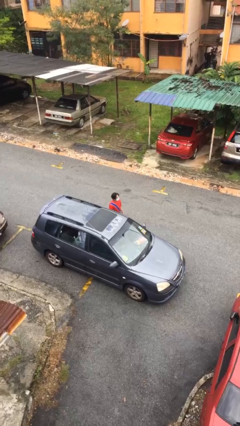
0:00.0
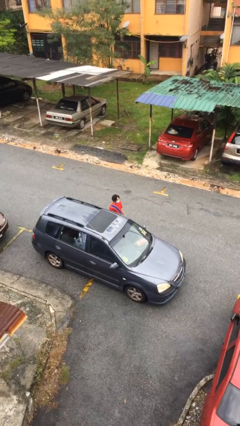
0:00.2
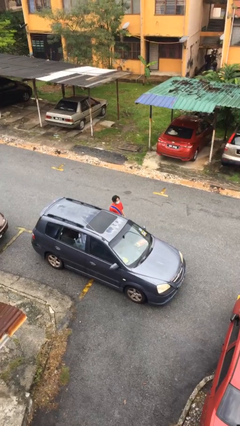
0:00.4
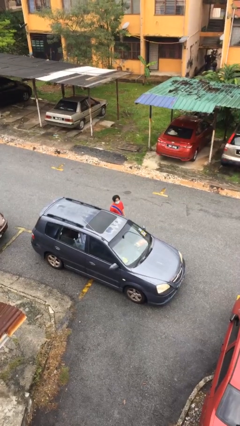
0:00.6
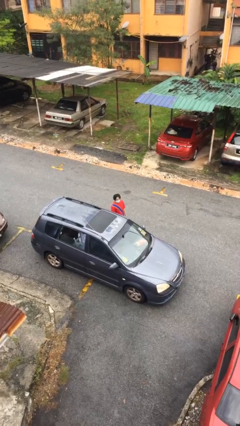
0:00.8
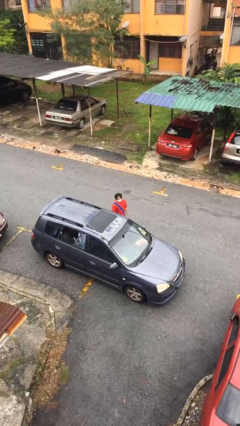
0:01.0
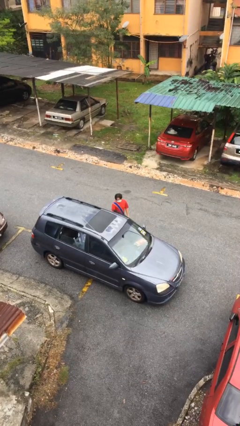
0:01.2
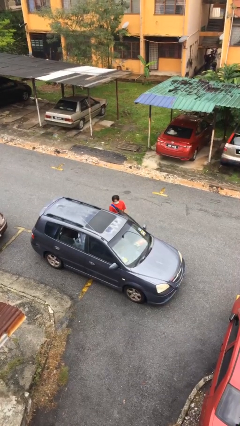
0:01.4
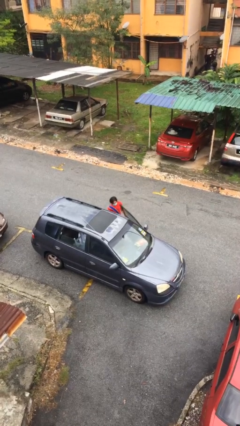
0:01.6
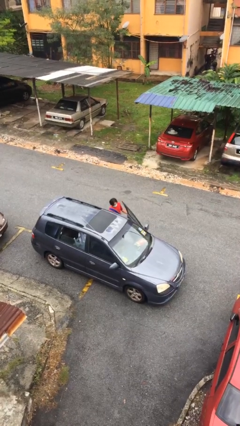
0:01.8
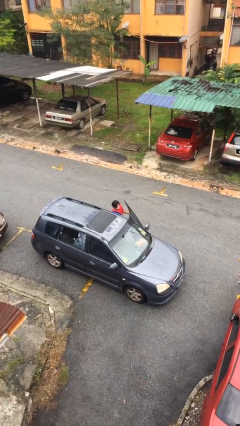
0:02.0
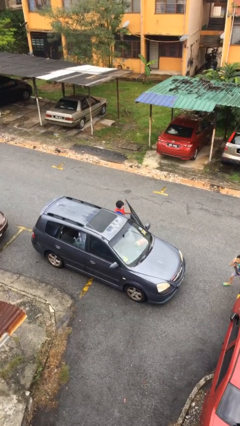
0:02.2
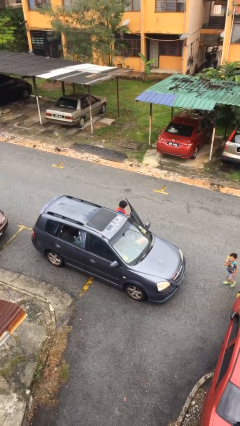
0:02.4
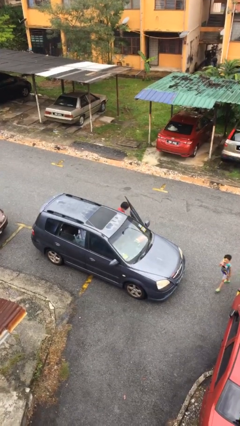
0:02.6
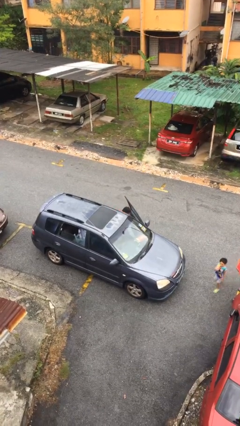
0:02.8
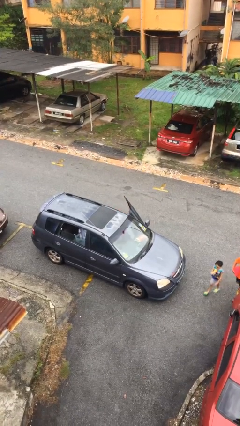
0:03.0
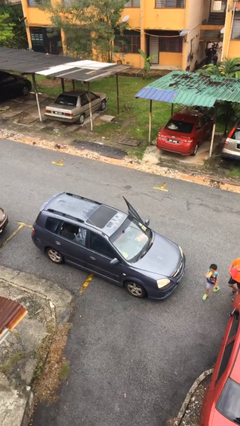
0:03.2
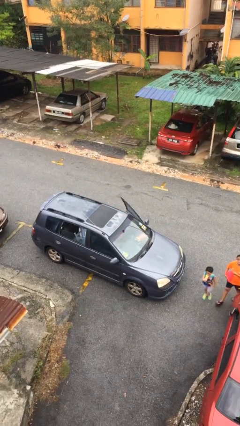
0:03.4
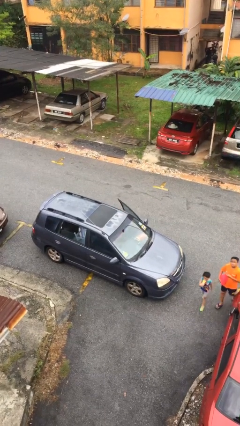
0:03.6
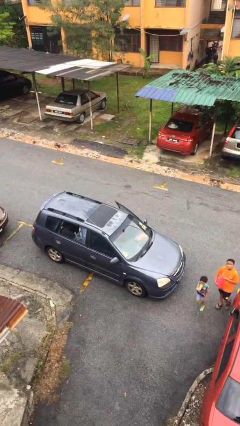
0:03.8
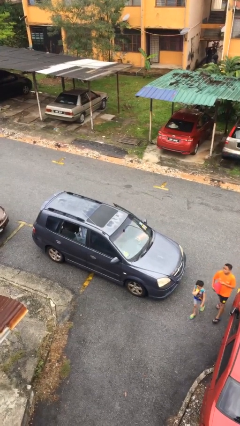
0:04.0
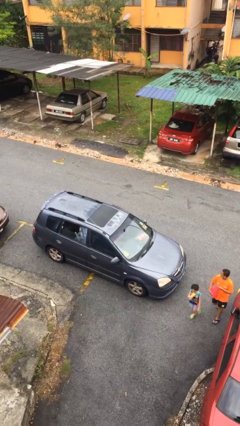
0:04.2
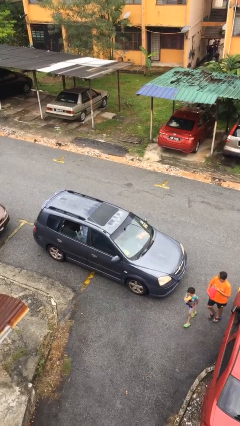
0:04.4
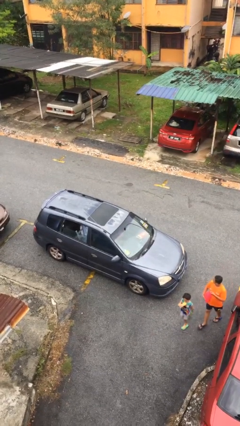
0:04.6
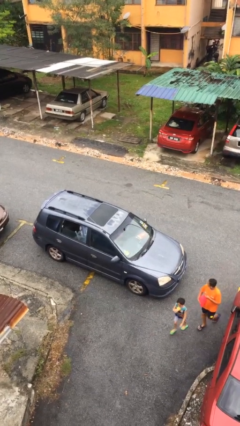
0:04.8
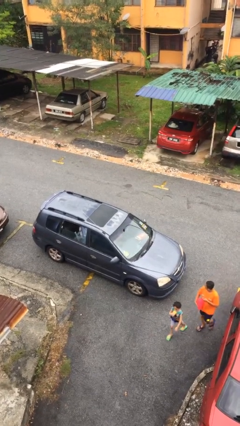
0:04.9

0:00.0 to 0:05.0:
person enters car

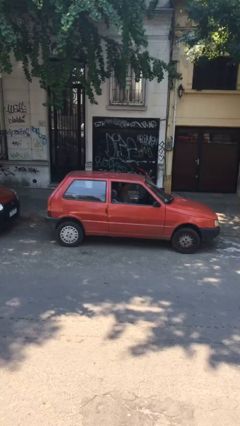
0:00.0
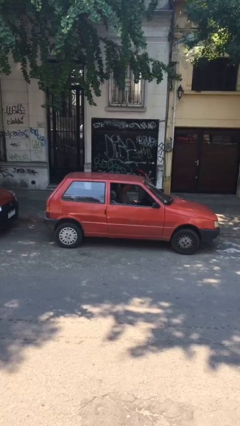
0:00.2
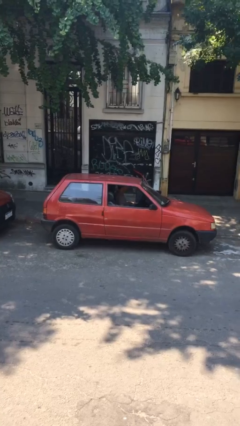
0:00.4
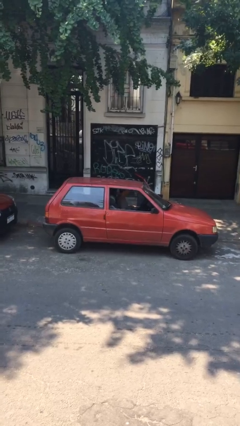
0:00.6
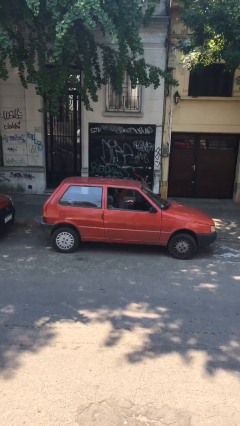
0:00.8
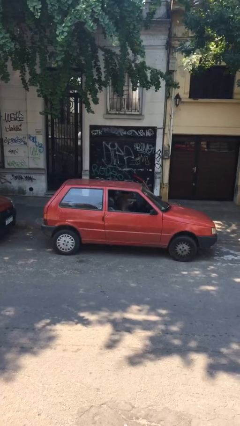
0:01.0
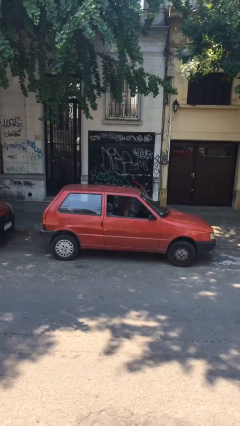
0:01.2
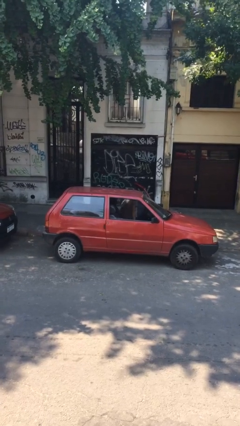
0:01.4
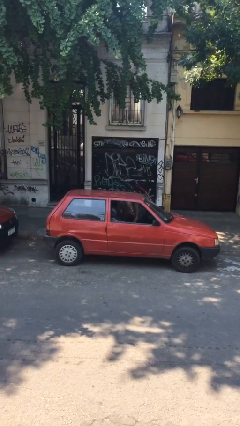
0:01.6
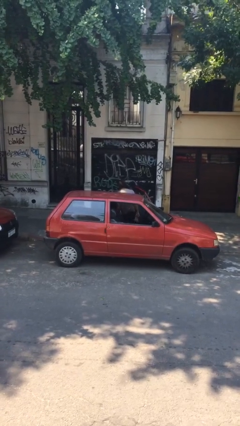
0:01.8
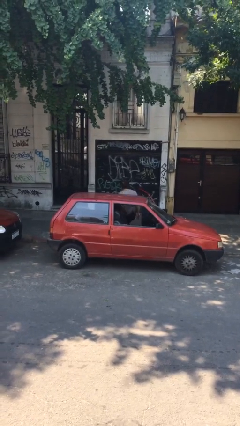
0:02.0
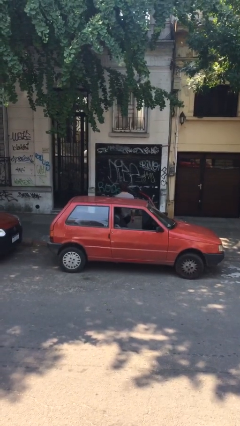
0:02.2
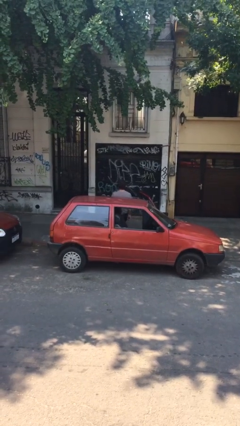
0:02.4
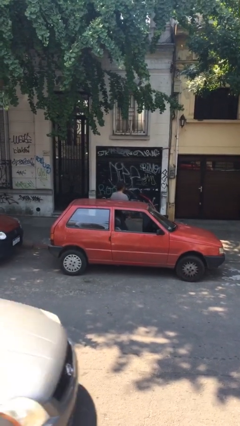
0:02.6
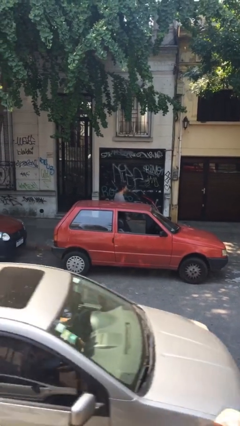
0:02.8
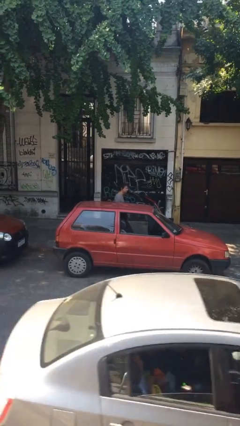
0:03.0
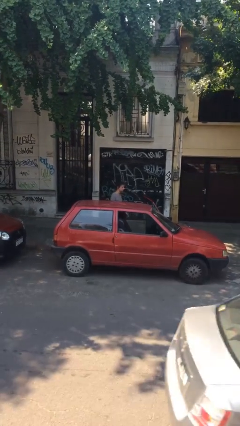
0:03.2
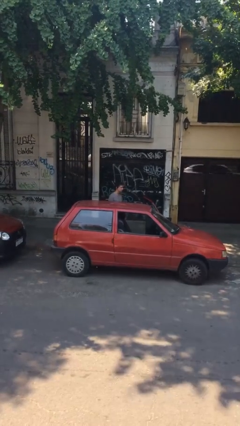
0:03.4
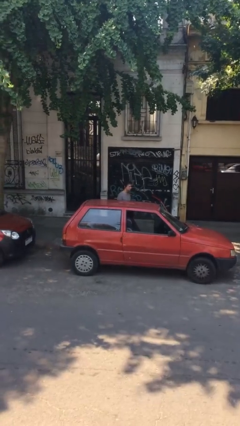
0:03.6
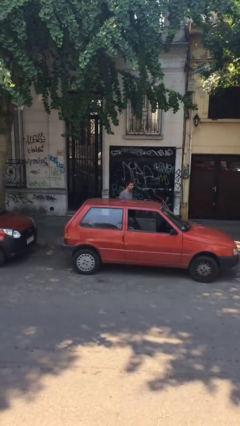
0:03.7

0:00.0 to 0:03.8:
person exits car

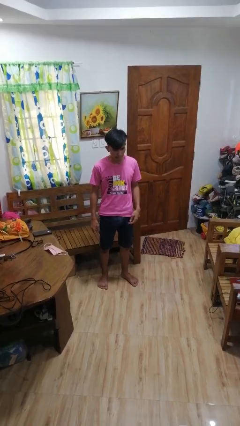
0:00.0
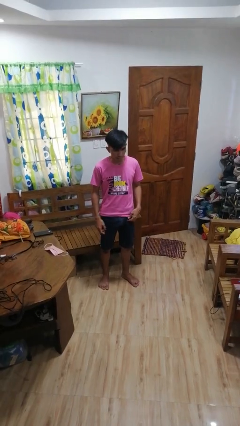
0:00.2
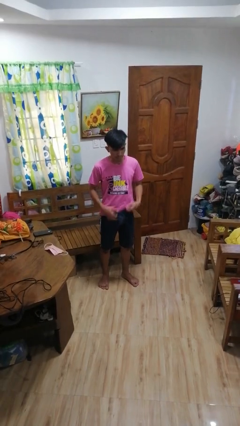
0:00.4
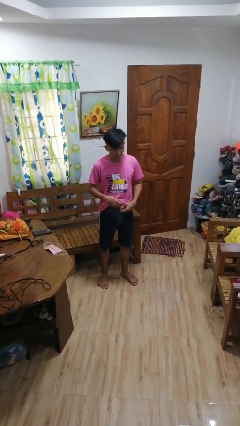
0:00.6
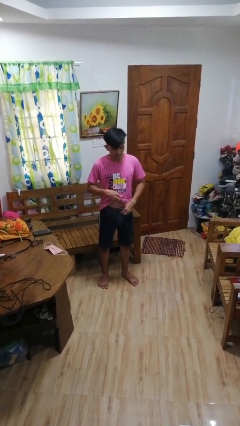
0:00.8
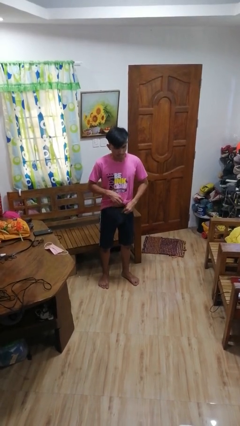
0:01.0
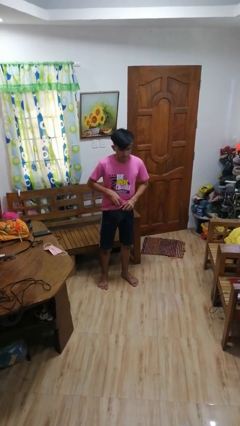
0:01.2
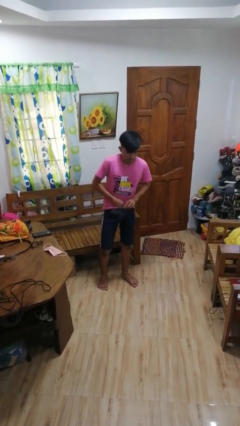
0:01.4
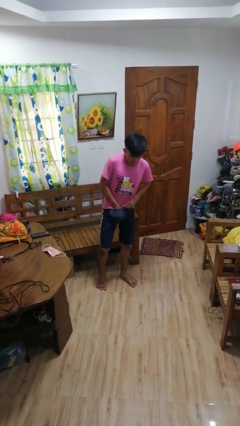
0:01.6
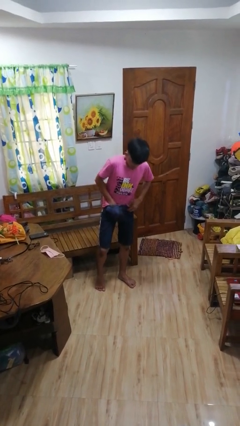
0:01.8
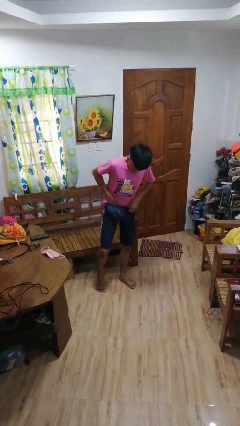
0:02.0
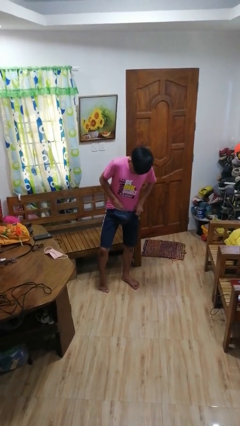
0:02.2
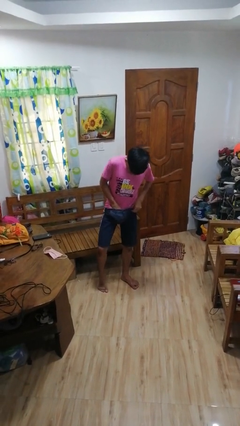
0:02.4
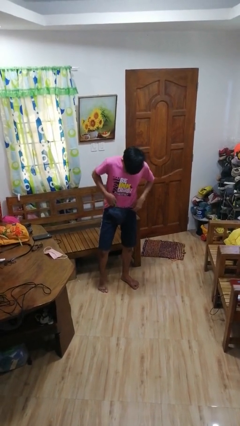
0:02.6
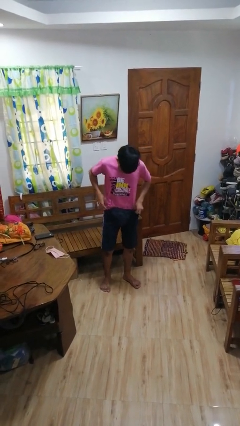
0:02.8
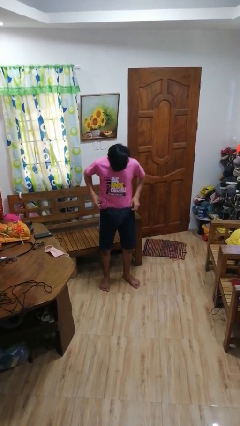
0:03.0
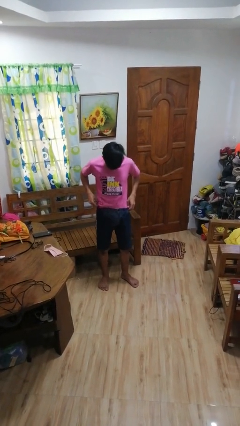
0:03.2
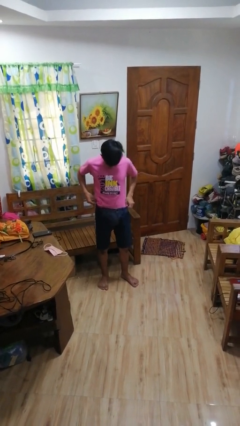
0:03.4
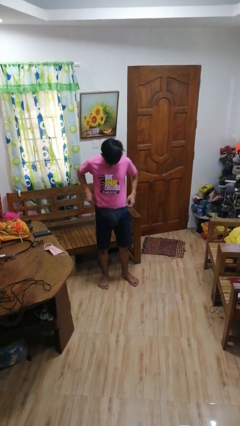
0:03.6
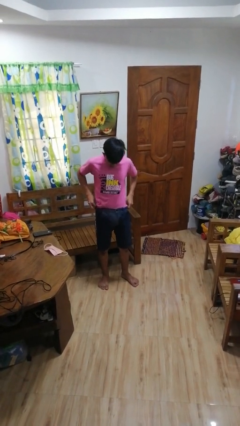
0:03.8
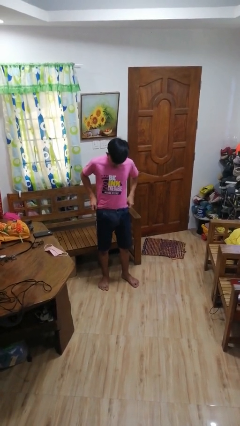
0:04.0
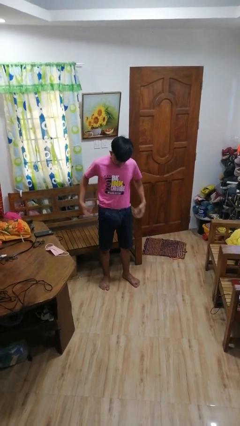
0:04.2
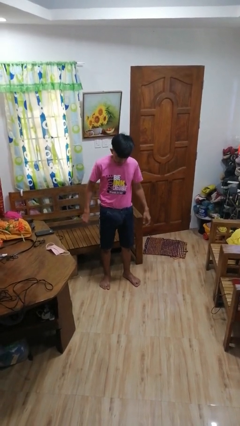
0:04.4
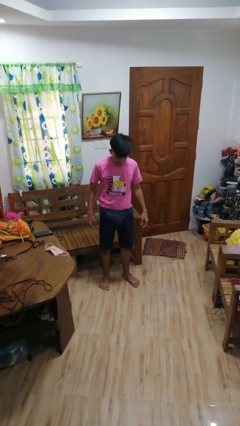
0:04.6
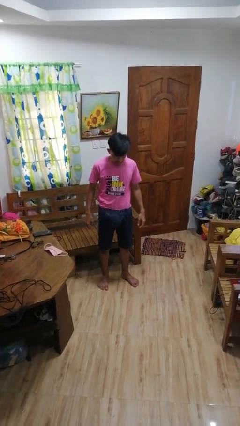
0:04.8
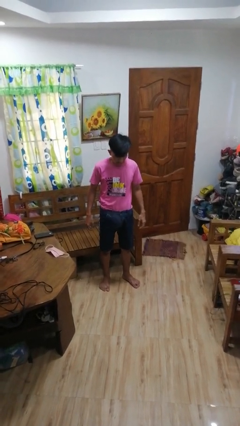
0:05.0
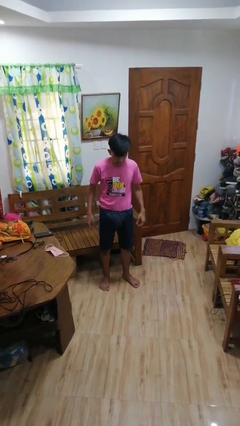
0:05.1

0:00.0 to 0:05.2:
person tucks in shirt

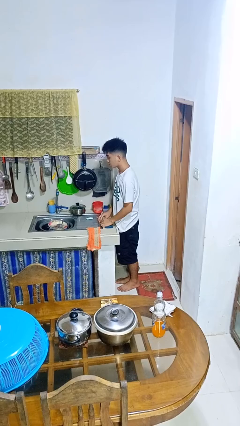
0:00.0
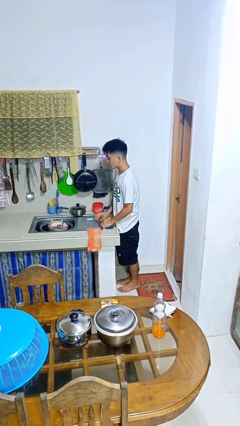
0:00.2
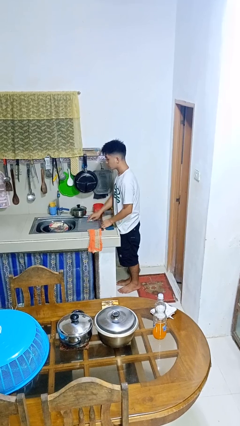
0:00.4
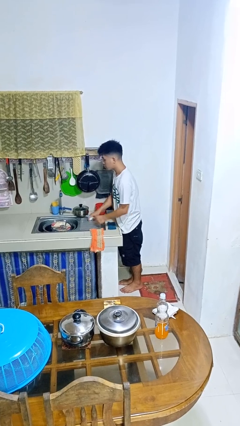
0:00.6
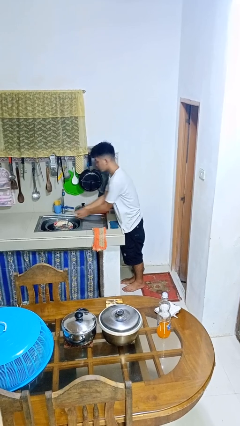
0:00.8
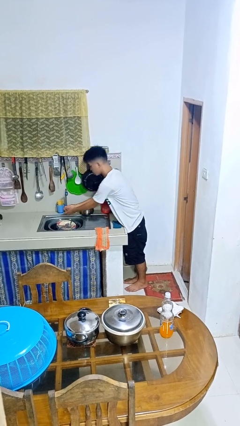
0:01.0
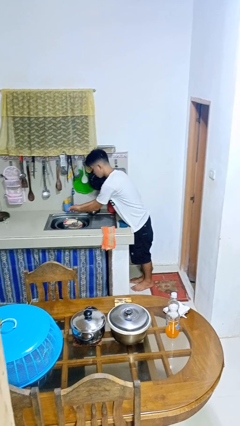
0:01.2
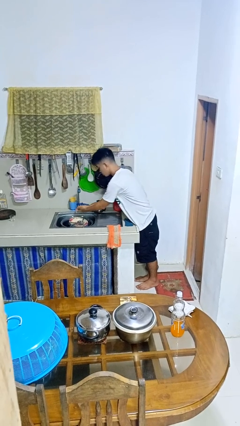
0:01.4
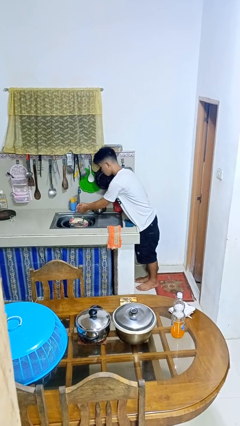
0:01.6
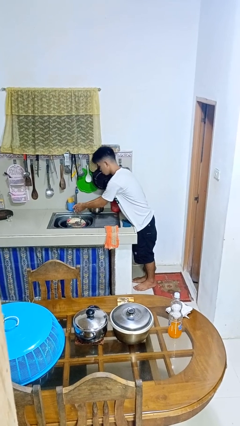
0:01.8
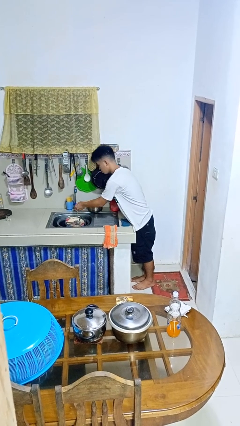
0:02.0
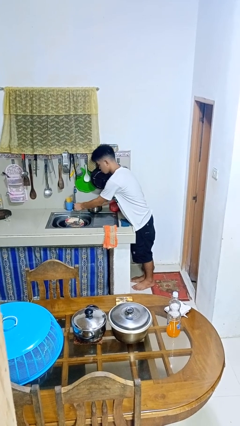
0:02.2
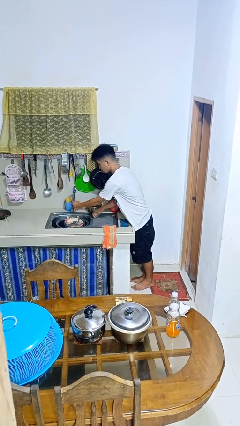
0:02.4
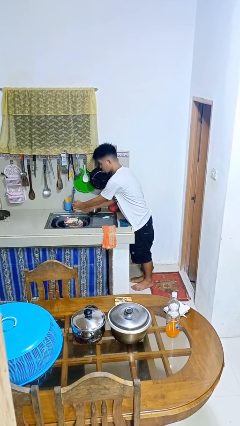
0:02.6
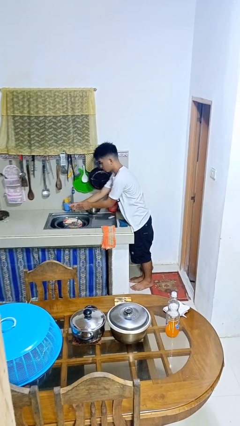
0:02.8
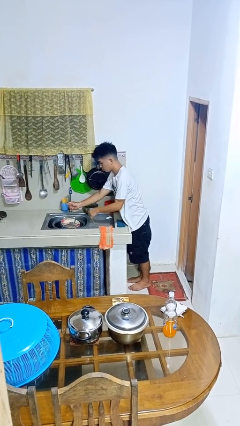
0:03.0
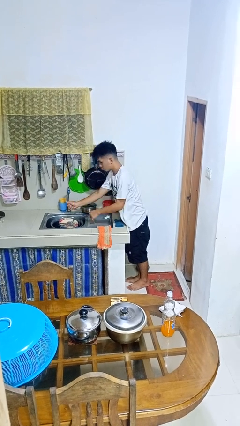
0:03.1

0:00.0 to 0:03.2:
person washes hands

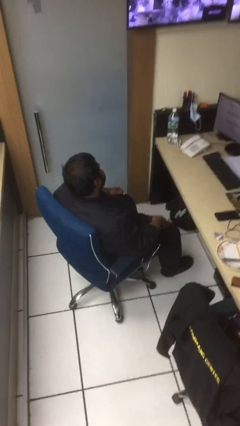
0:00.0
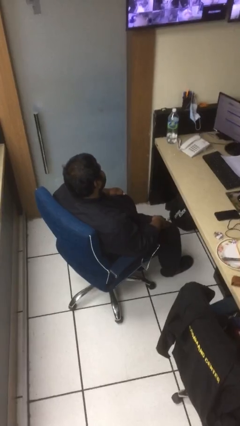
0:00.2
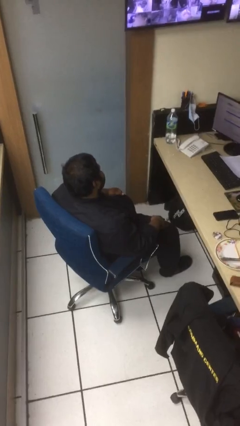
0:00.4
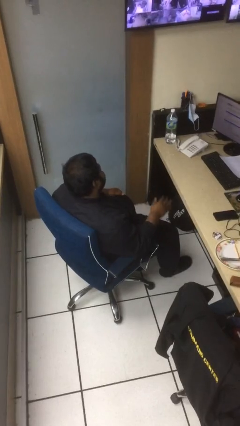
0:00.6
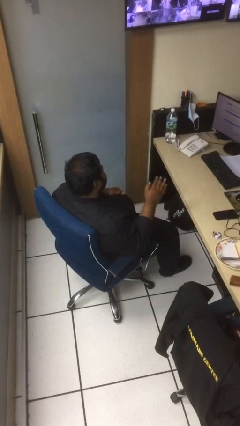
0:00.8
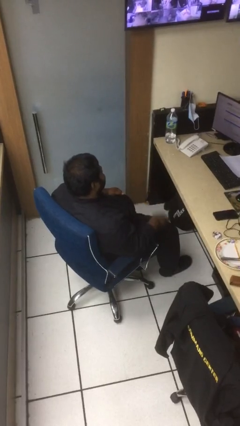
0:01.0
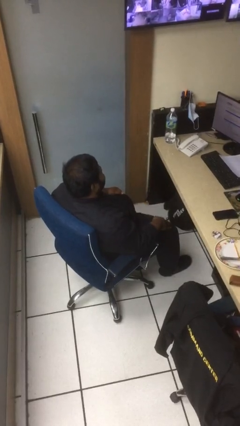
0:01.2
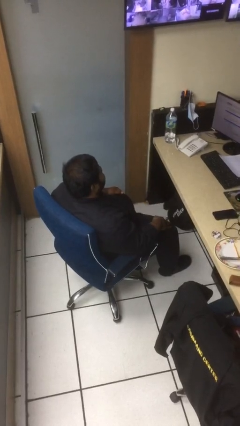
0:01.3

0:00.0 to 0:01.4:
person slaps hands on thighs
